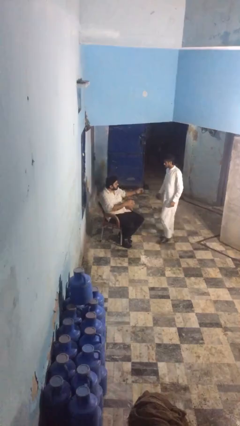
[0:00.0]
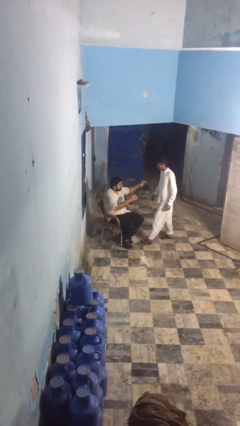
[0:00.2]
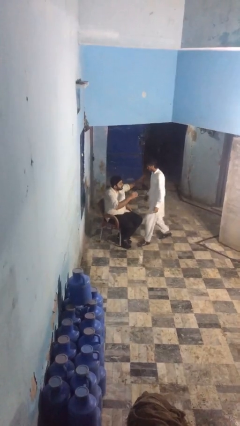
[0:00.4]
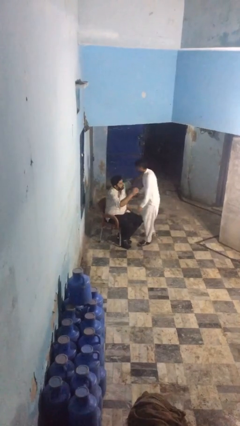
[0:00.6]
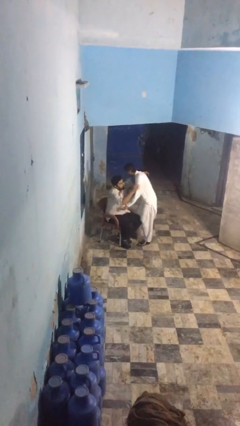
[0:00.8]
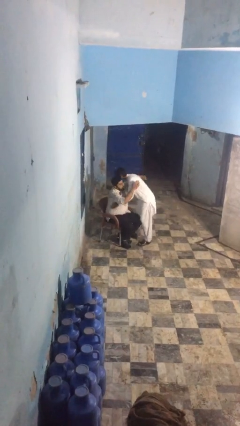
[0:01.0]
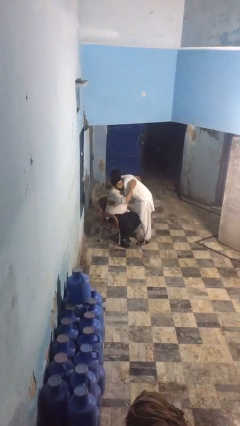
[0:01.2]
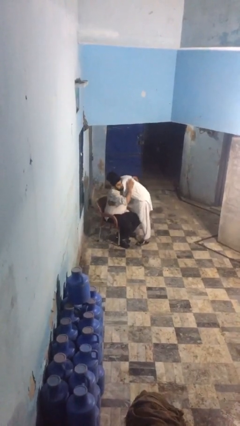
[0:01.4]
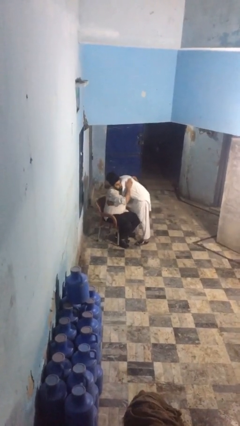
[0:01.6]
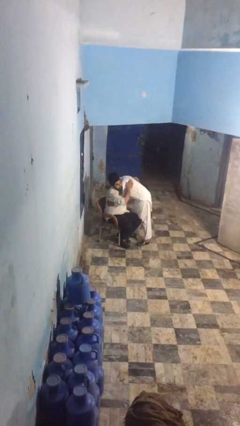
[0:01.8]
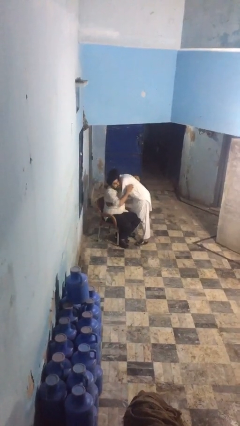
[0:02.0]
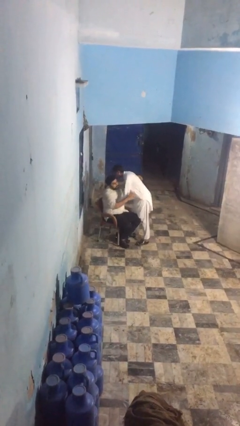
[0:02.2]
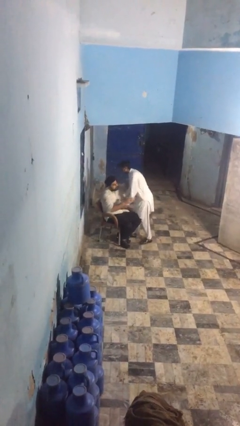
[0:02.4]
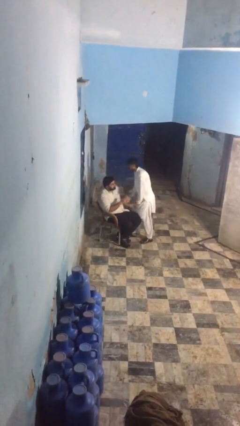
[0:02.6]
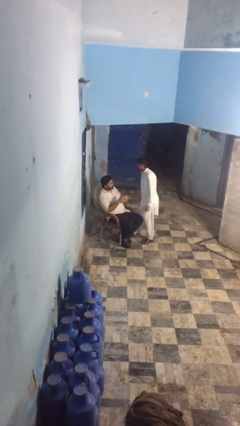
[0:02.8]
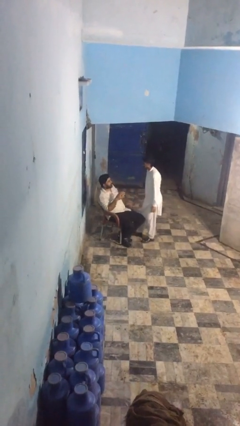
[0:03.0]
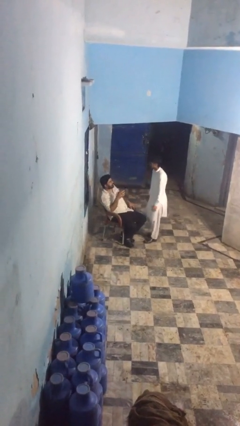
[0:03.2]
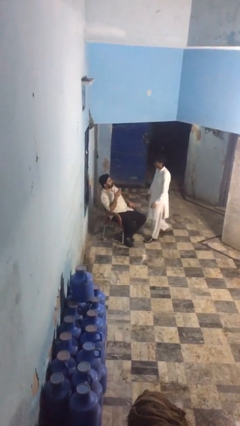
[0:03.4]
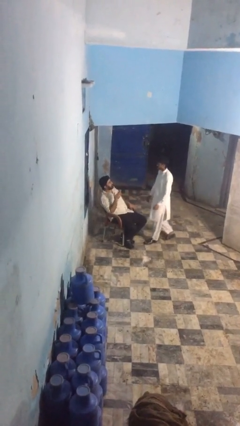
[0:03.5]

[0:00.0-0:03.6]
person embraces person

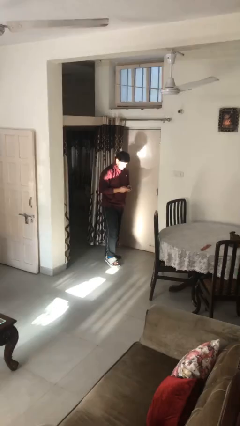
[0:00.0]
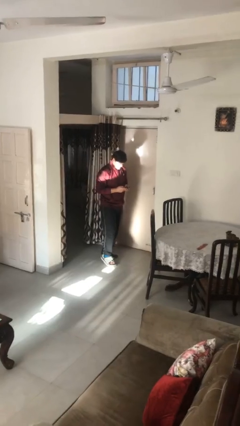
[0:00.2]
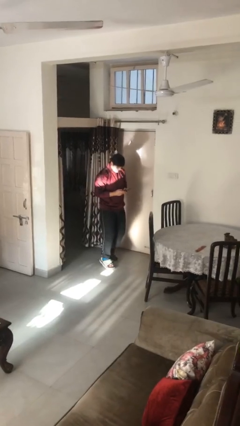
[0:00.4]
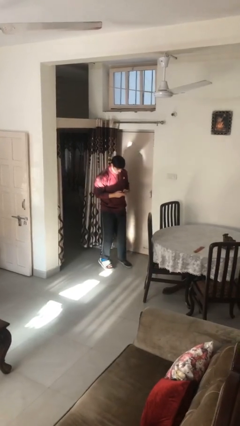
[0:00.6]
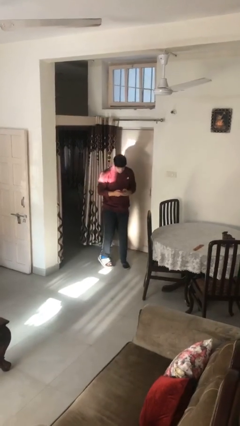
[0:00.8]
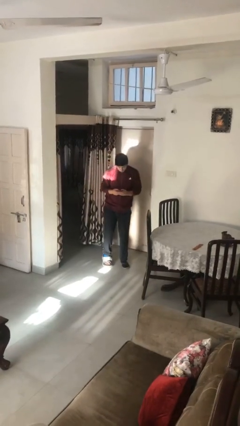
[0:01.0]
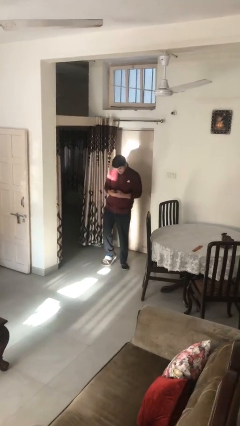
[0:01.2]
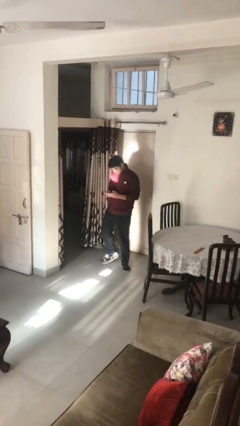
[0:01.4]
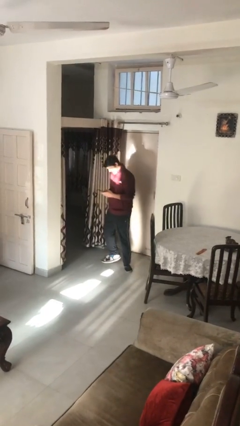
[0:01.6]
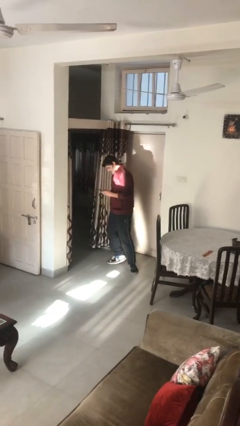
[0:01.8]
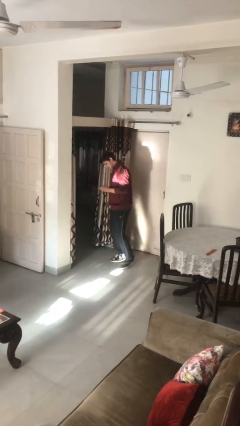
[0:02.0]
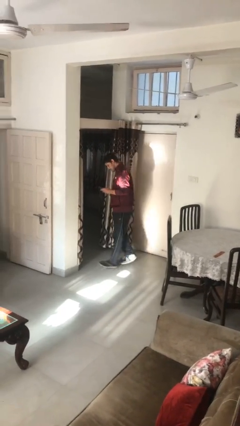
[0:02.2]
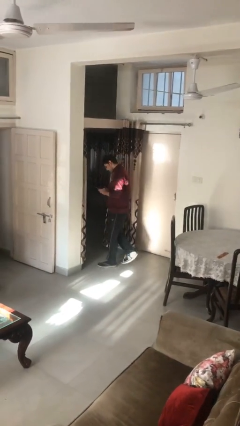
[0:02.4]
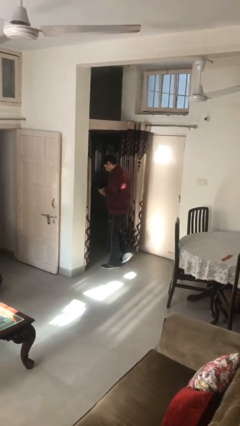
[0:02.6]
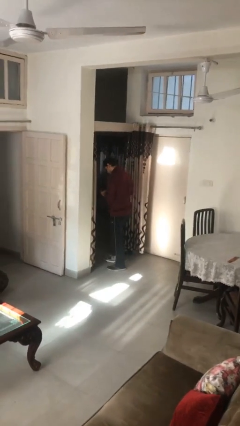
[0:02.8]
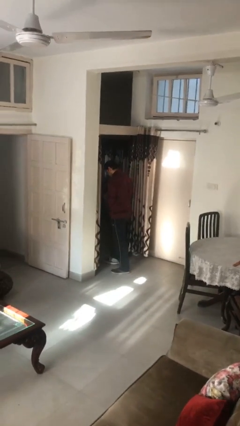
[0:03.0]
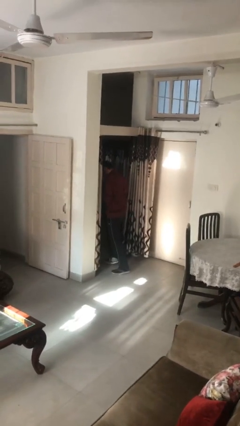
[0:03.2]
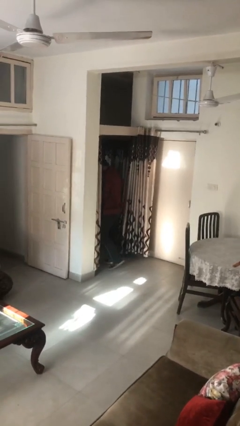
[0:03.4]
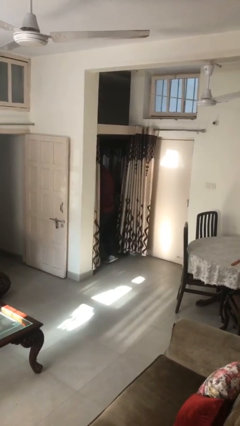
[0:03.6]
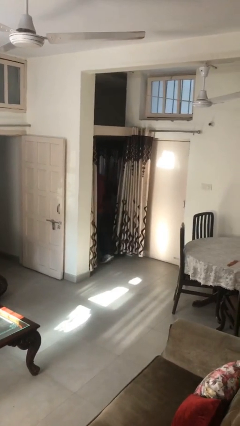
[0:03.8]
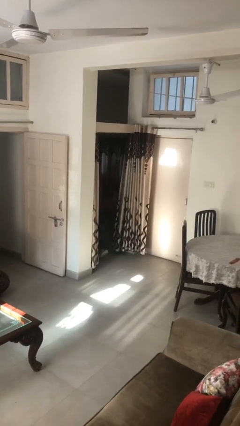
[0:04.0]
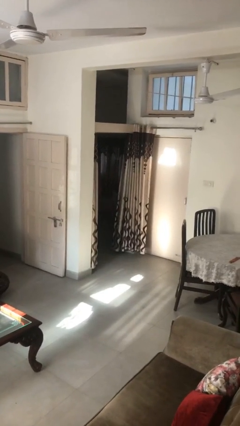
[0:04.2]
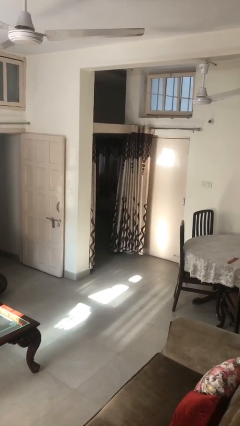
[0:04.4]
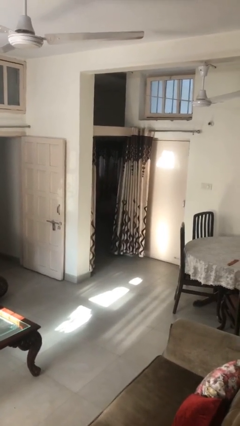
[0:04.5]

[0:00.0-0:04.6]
person exits scene through structure

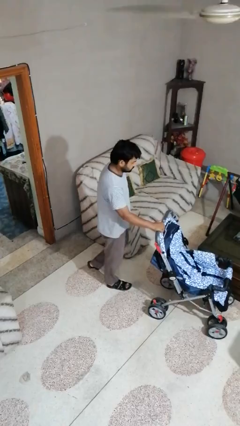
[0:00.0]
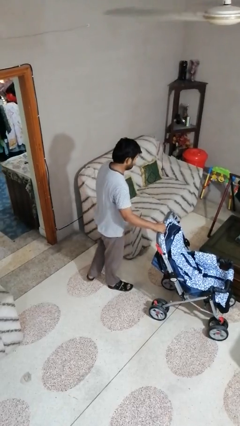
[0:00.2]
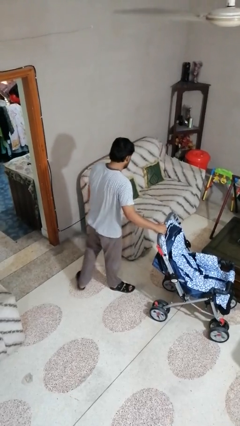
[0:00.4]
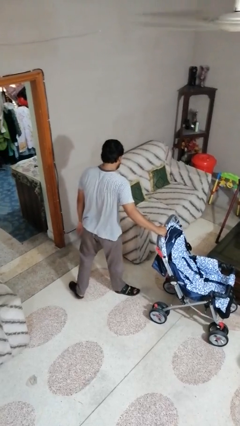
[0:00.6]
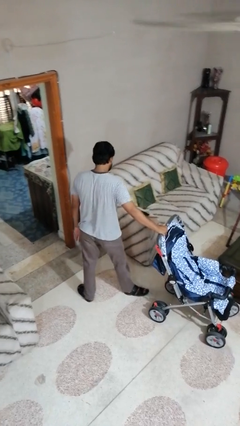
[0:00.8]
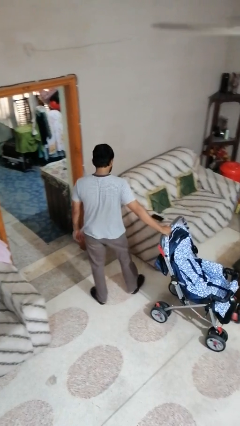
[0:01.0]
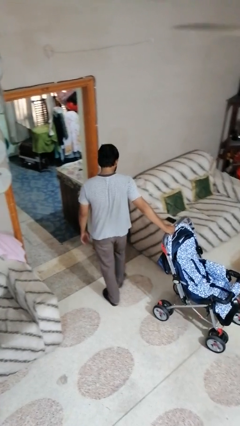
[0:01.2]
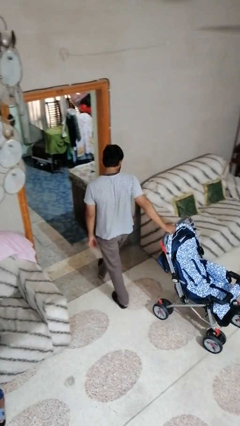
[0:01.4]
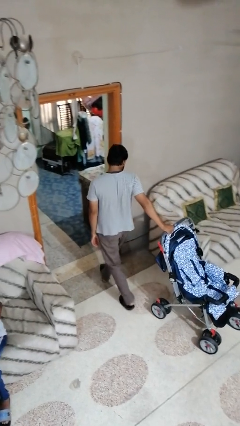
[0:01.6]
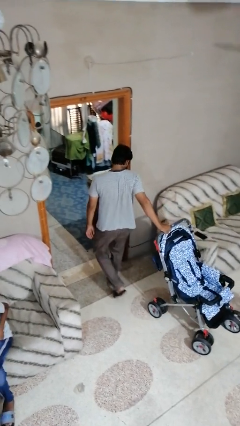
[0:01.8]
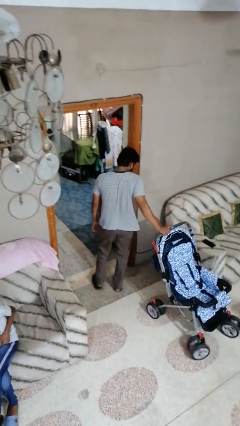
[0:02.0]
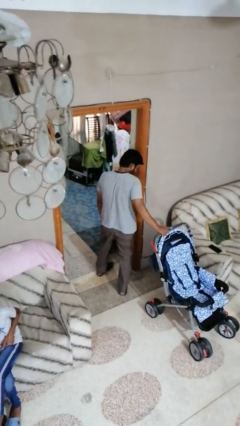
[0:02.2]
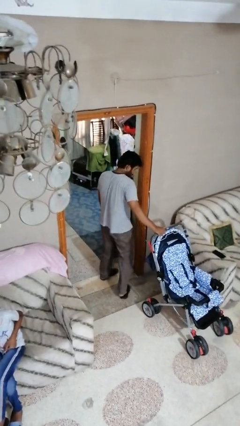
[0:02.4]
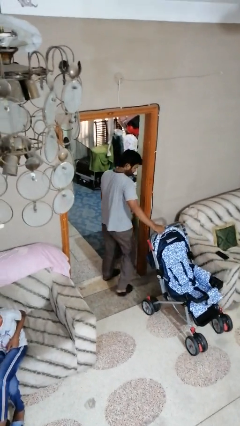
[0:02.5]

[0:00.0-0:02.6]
person pulls wheeled cart

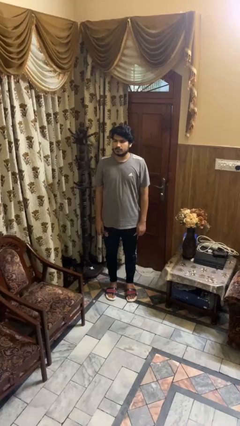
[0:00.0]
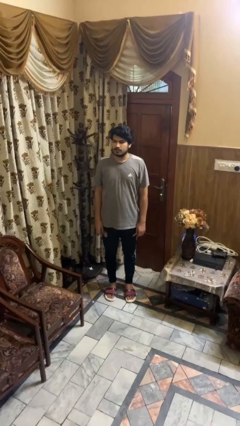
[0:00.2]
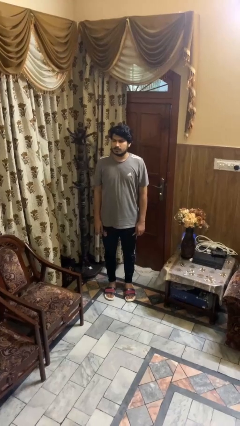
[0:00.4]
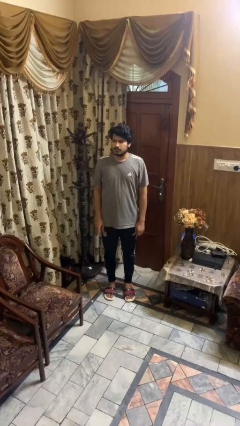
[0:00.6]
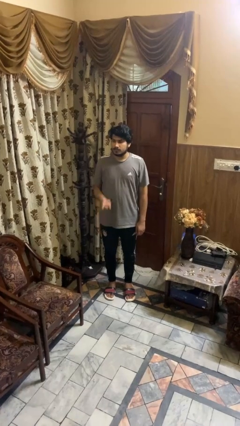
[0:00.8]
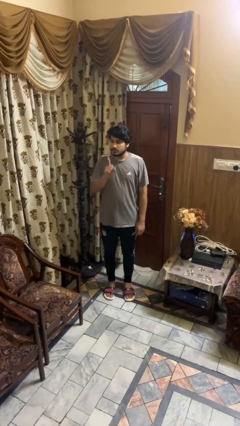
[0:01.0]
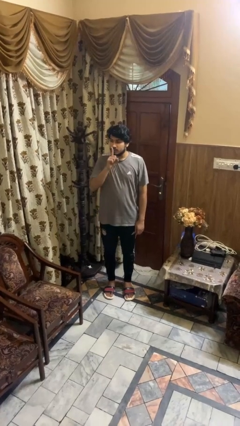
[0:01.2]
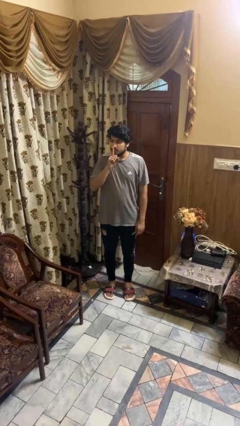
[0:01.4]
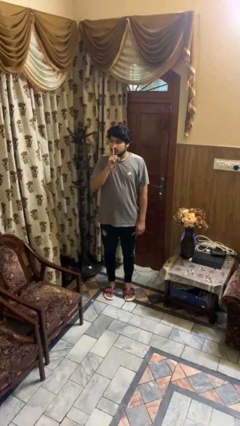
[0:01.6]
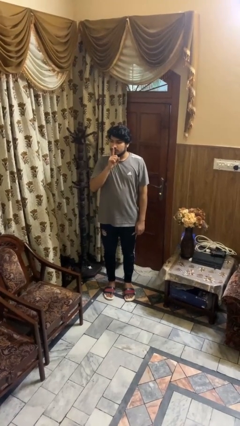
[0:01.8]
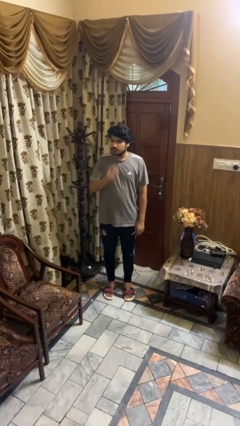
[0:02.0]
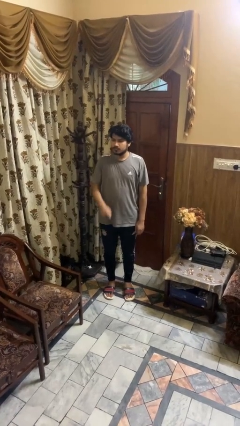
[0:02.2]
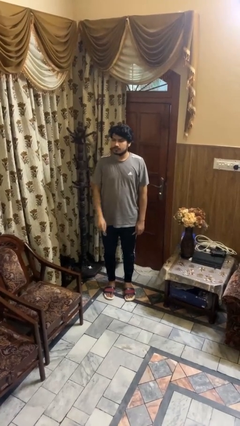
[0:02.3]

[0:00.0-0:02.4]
person gestures be quiet

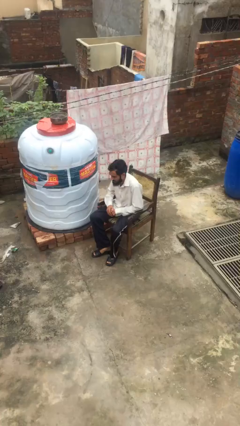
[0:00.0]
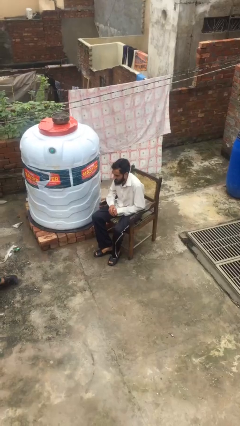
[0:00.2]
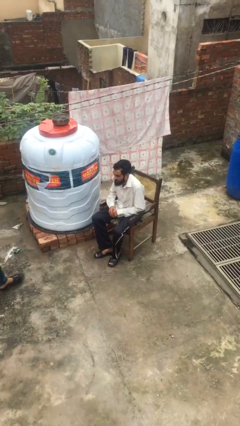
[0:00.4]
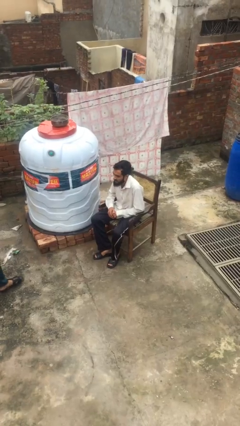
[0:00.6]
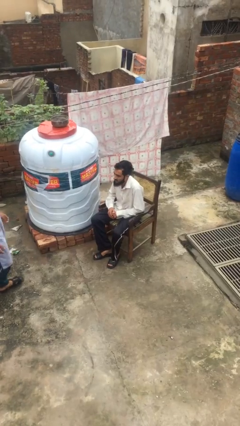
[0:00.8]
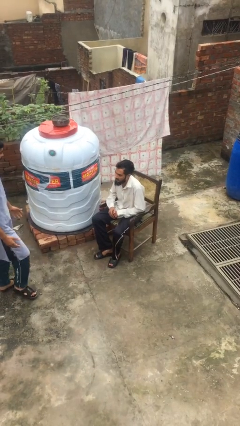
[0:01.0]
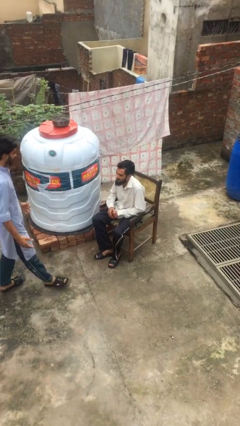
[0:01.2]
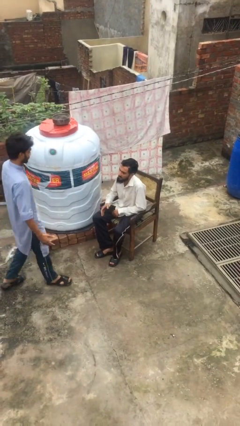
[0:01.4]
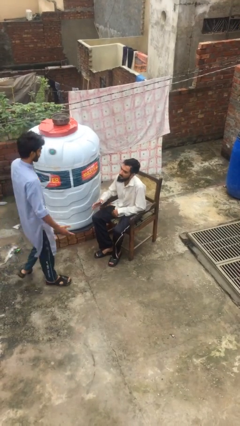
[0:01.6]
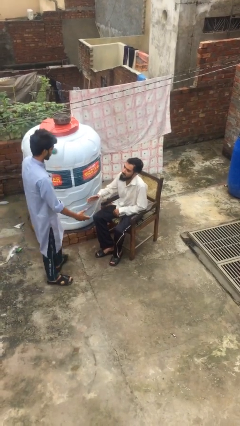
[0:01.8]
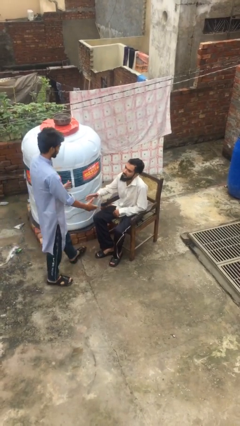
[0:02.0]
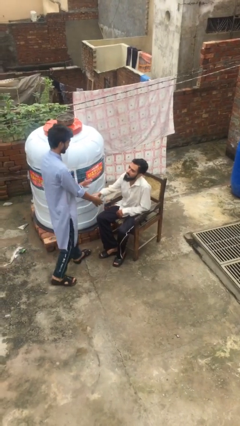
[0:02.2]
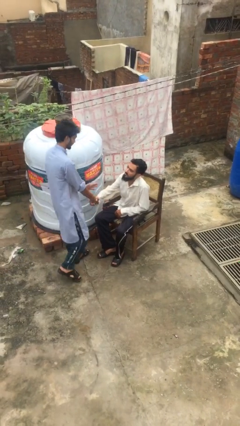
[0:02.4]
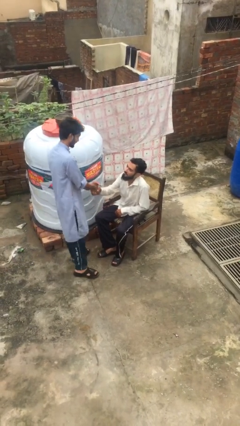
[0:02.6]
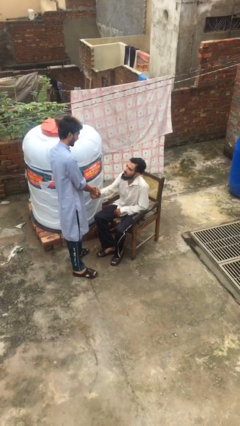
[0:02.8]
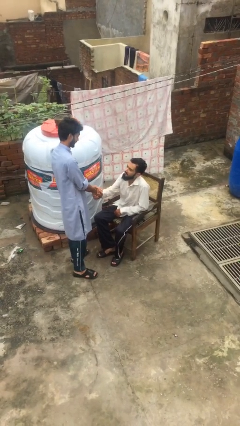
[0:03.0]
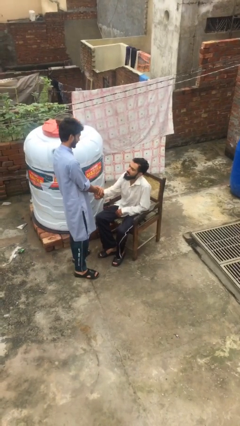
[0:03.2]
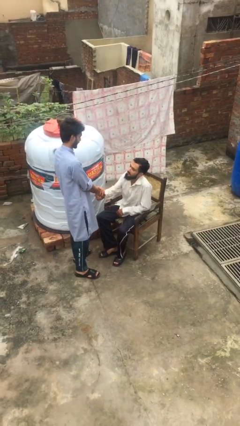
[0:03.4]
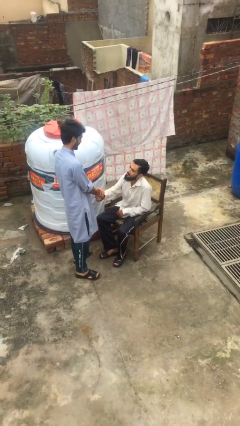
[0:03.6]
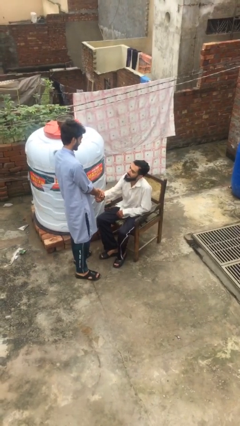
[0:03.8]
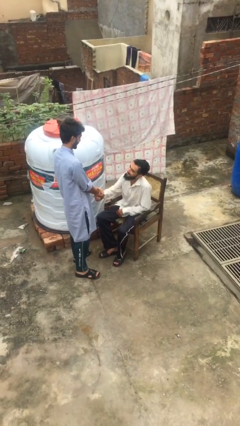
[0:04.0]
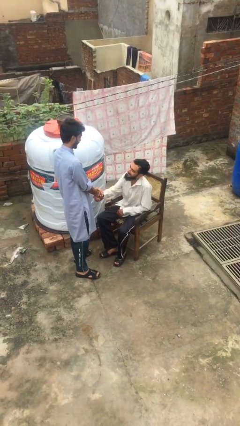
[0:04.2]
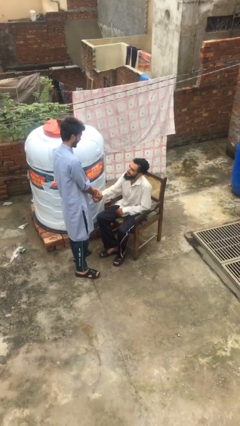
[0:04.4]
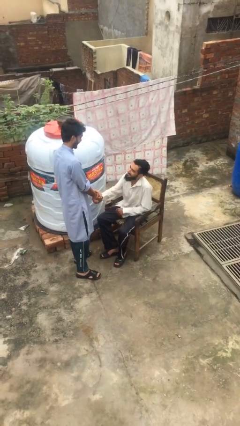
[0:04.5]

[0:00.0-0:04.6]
person shakes hand
